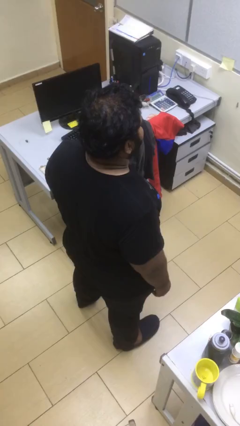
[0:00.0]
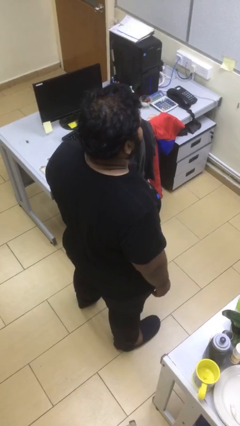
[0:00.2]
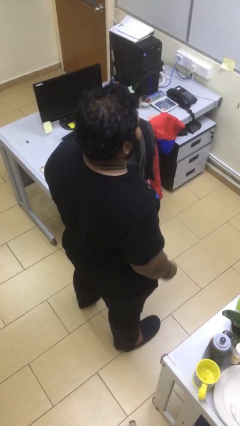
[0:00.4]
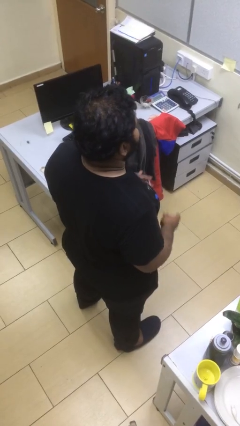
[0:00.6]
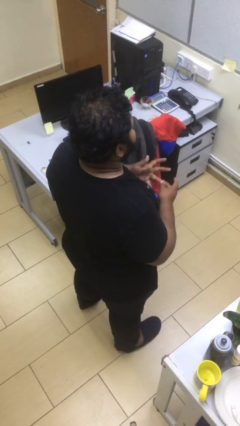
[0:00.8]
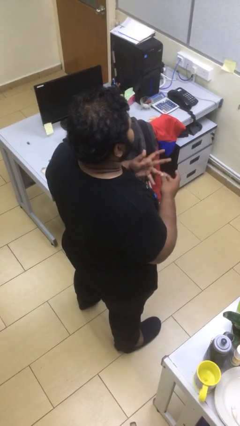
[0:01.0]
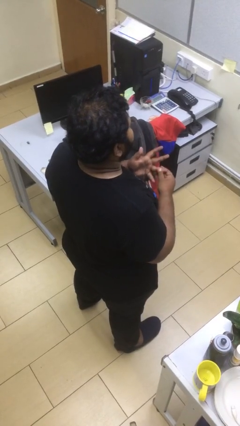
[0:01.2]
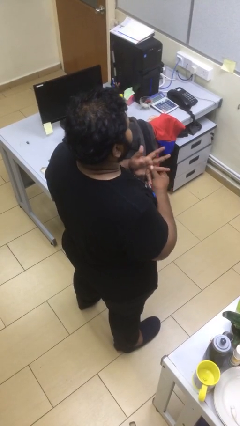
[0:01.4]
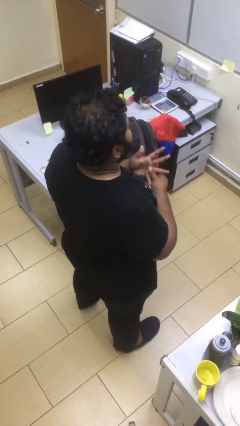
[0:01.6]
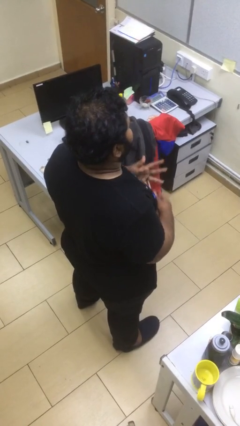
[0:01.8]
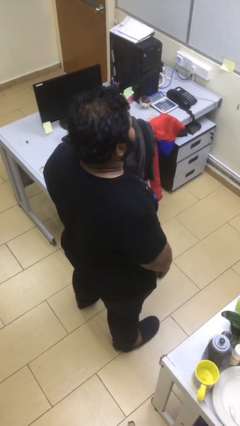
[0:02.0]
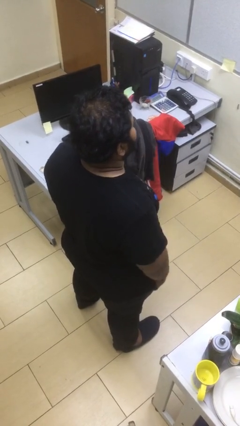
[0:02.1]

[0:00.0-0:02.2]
person puts on ring

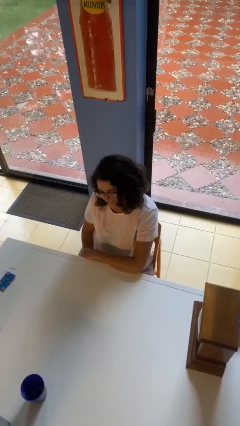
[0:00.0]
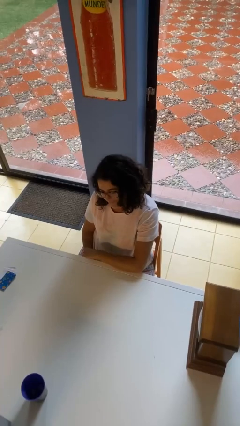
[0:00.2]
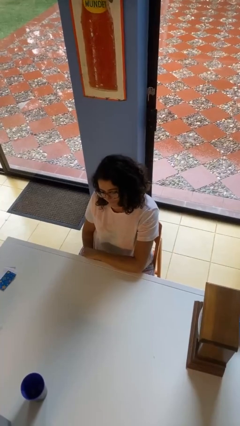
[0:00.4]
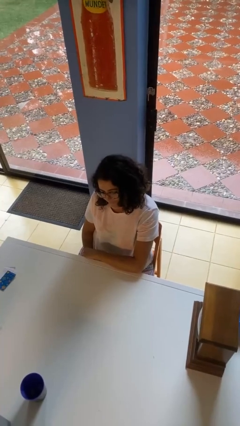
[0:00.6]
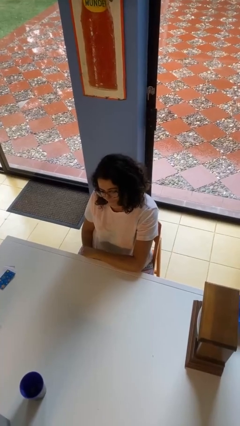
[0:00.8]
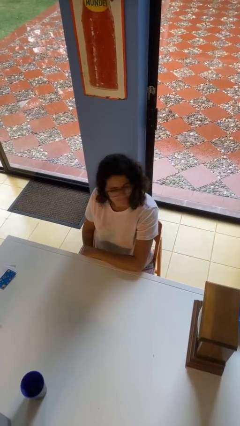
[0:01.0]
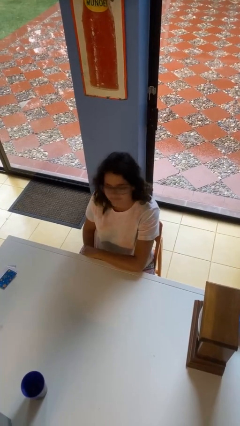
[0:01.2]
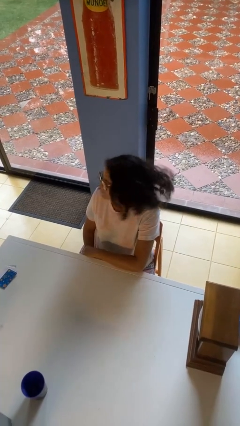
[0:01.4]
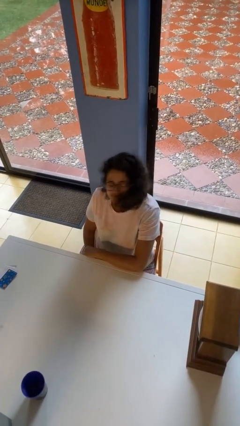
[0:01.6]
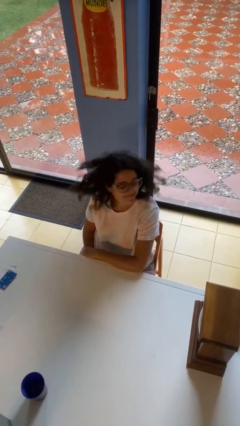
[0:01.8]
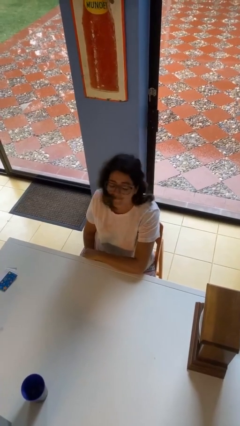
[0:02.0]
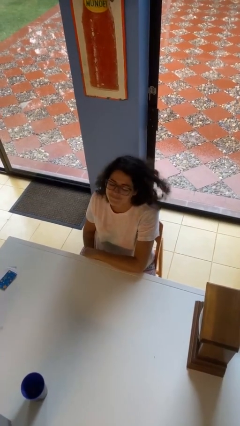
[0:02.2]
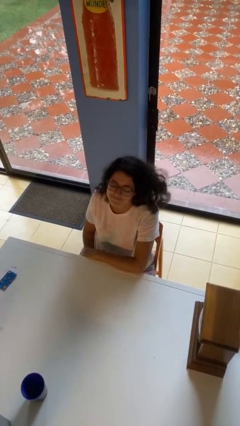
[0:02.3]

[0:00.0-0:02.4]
person shakes head

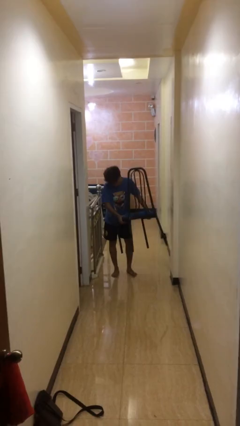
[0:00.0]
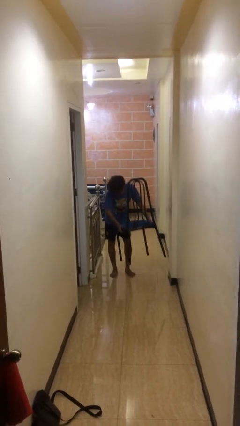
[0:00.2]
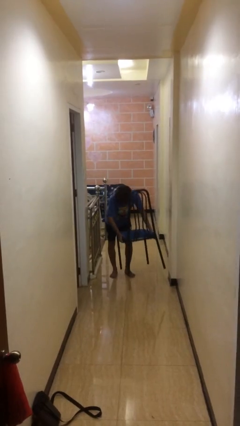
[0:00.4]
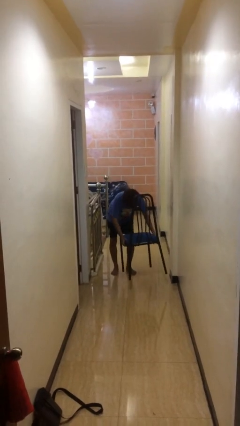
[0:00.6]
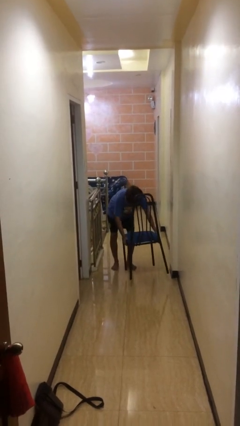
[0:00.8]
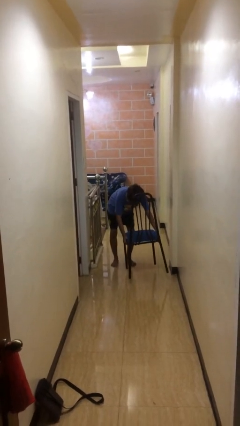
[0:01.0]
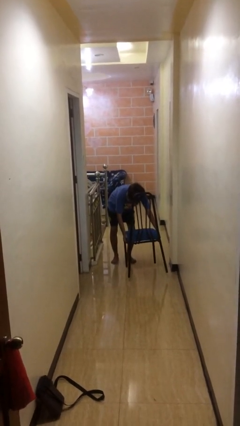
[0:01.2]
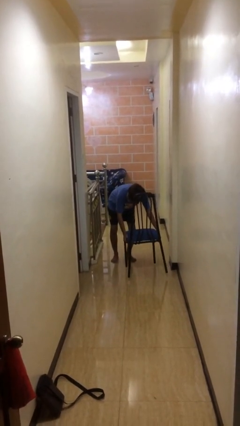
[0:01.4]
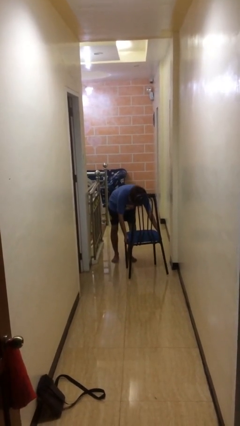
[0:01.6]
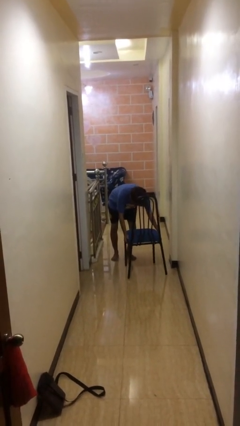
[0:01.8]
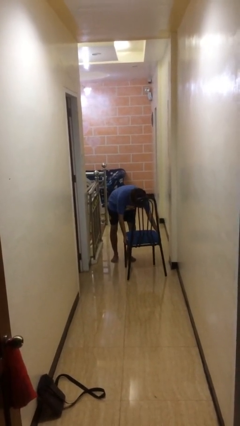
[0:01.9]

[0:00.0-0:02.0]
person puts down object on floor

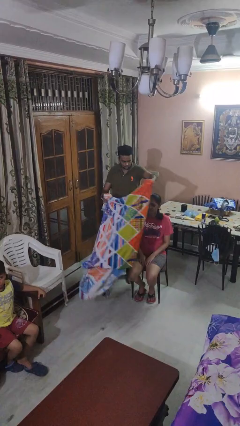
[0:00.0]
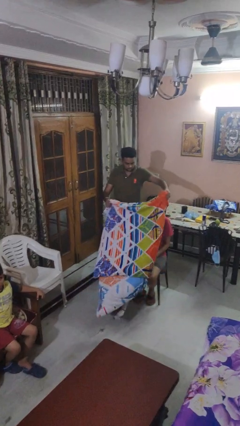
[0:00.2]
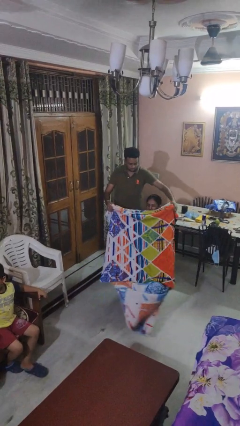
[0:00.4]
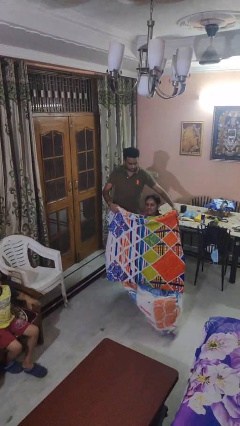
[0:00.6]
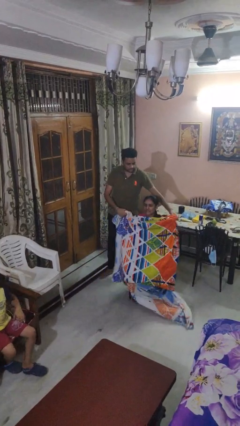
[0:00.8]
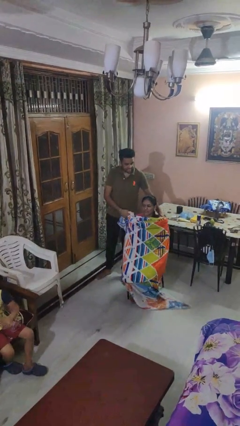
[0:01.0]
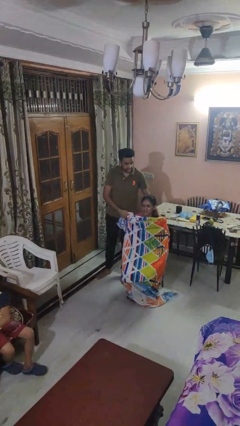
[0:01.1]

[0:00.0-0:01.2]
person covers friend with blanket

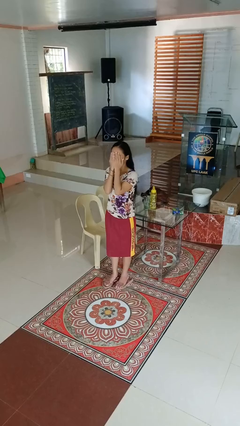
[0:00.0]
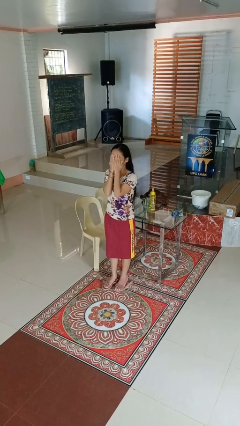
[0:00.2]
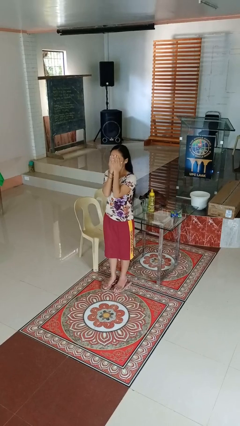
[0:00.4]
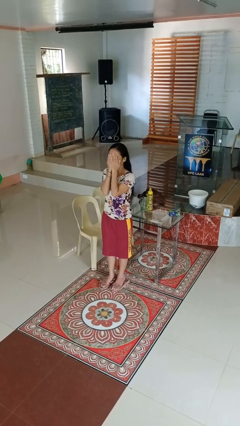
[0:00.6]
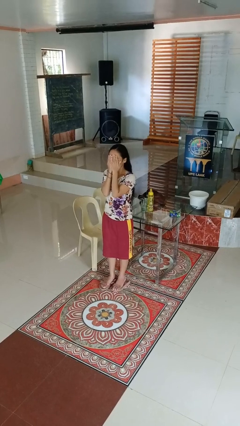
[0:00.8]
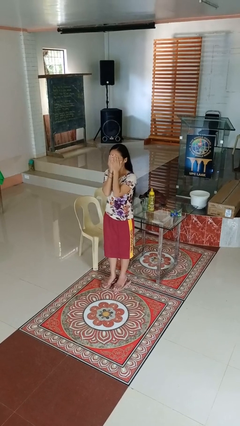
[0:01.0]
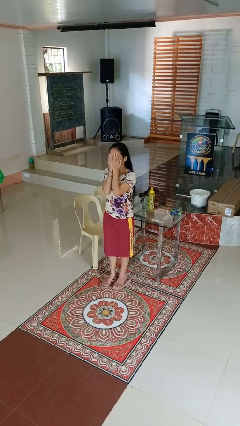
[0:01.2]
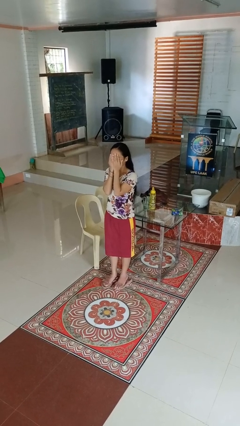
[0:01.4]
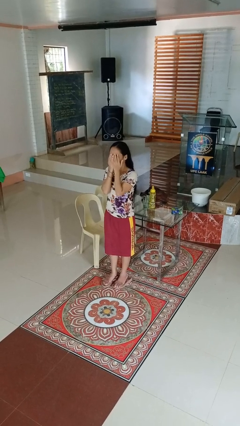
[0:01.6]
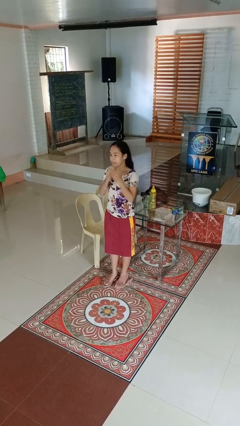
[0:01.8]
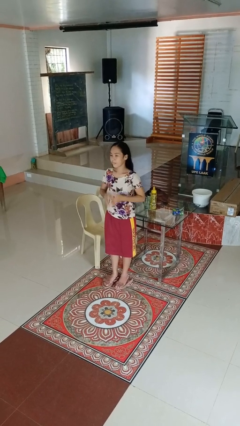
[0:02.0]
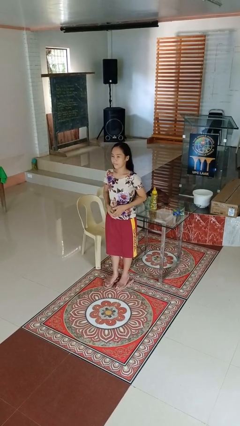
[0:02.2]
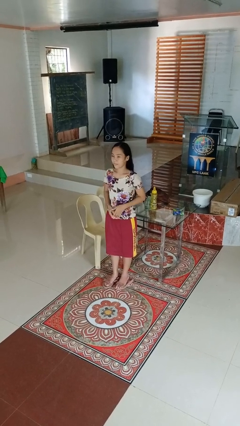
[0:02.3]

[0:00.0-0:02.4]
person covers face with hands

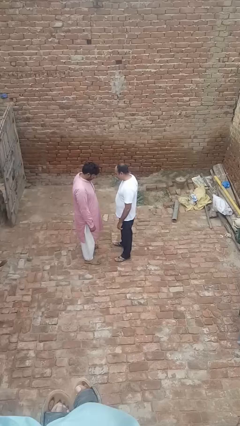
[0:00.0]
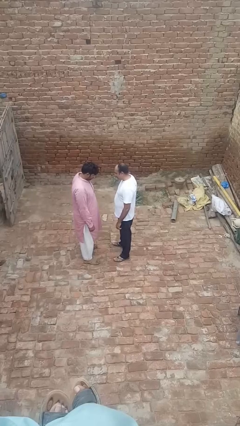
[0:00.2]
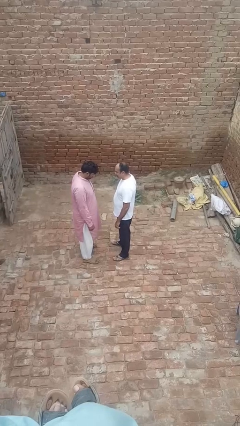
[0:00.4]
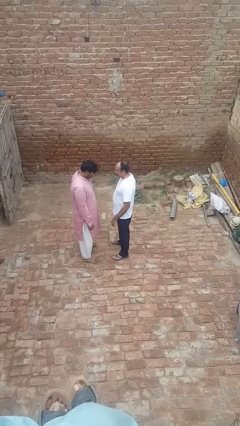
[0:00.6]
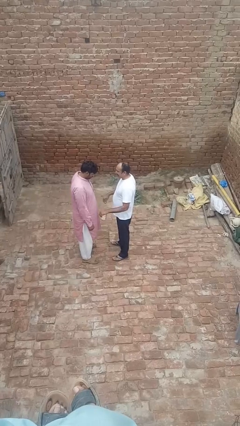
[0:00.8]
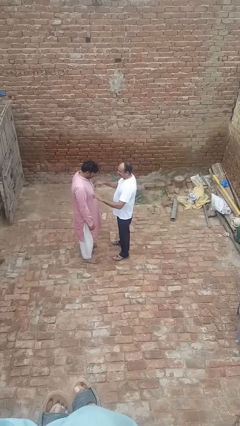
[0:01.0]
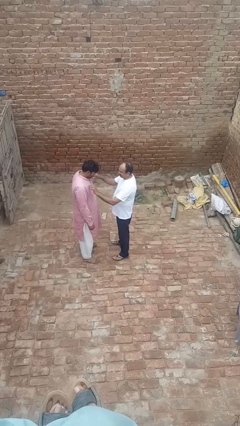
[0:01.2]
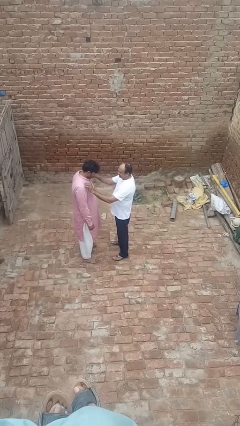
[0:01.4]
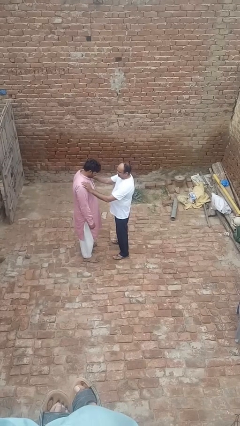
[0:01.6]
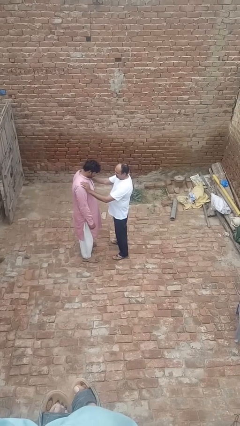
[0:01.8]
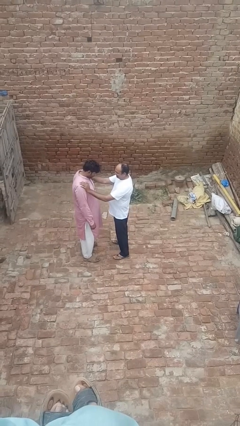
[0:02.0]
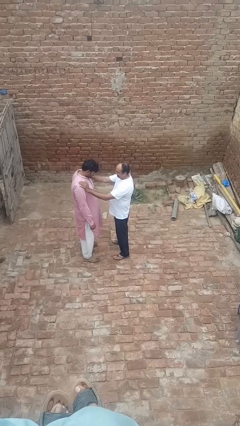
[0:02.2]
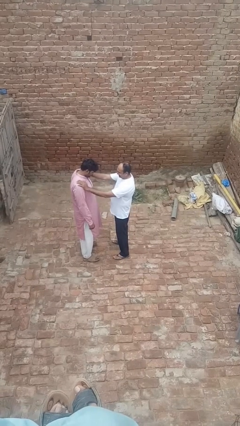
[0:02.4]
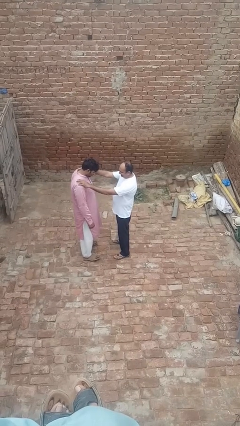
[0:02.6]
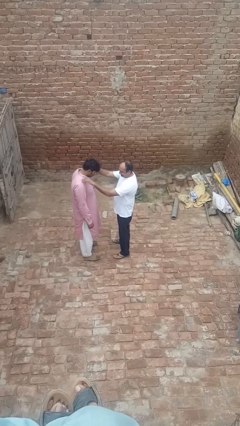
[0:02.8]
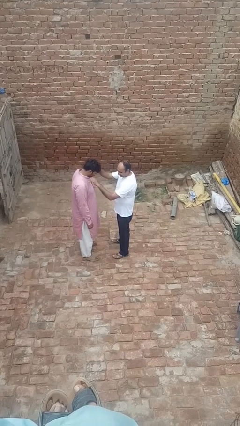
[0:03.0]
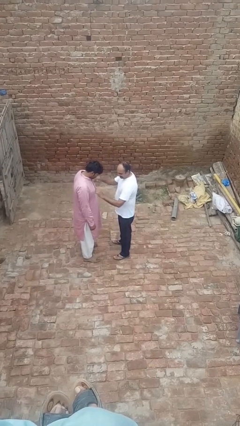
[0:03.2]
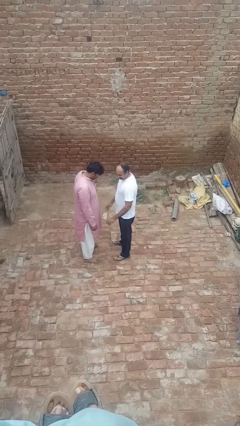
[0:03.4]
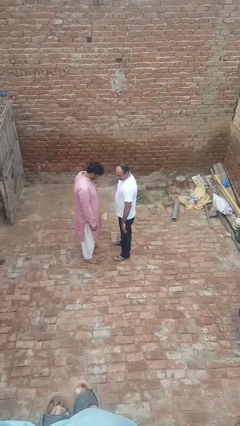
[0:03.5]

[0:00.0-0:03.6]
person shoves person

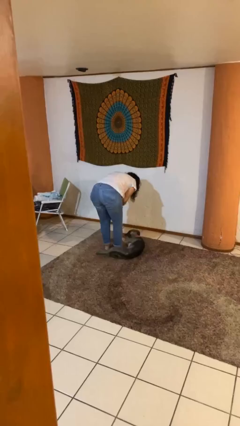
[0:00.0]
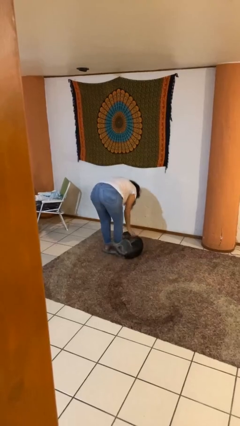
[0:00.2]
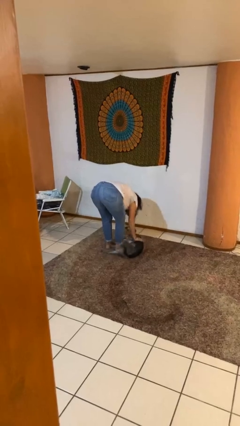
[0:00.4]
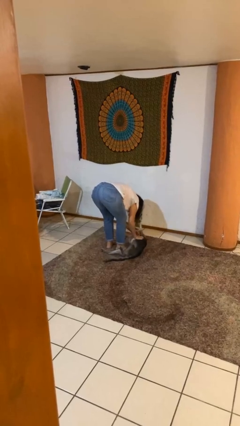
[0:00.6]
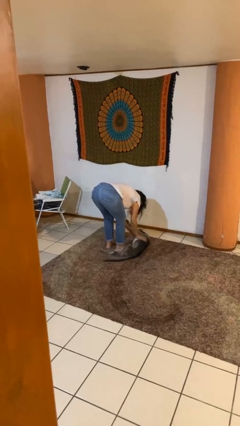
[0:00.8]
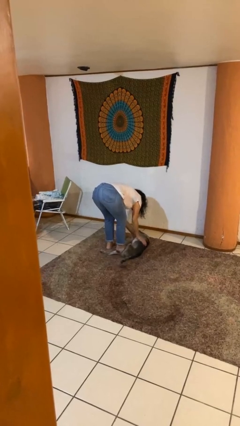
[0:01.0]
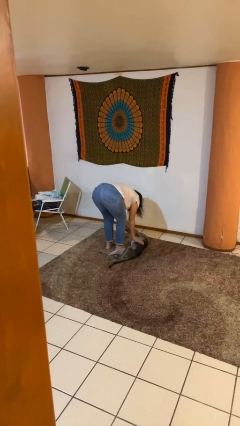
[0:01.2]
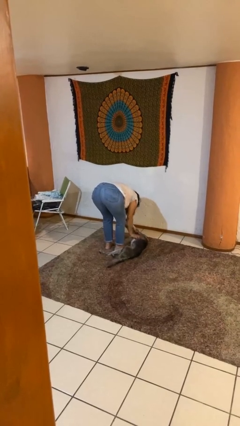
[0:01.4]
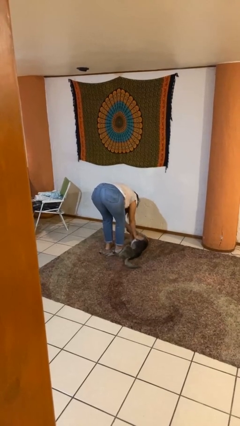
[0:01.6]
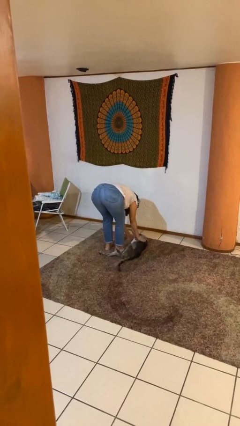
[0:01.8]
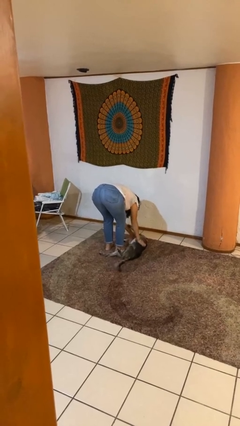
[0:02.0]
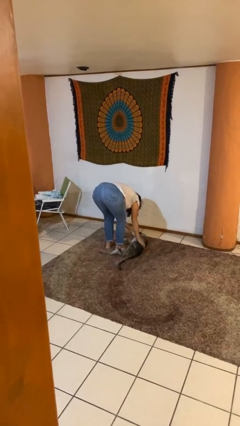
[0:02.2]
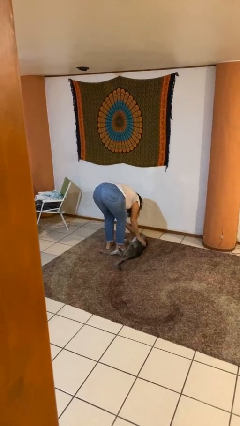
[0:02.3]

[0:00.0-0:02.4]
person pets dog

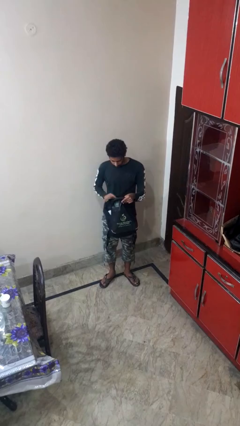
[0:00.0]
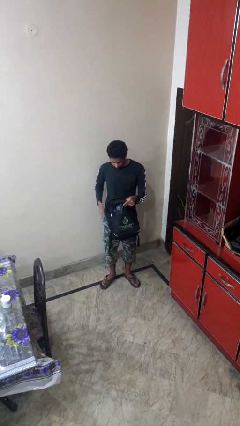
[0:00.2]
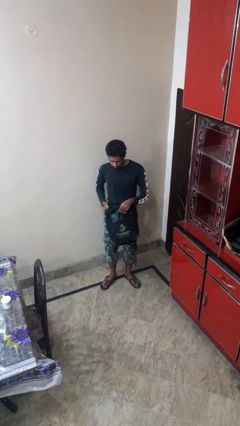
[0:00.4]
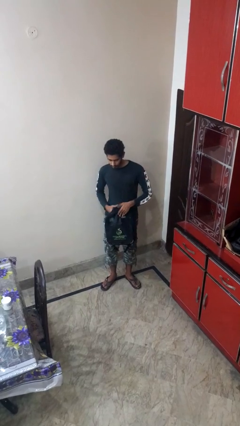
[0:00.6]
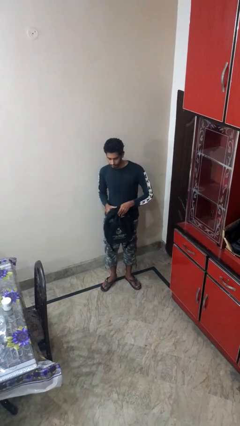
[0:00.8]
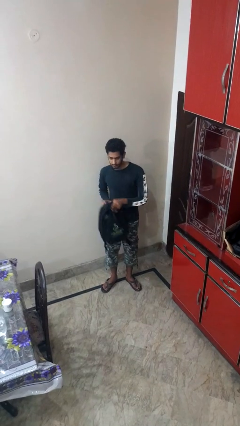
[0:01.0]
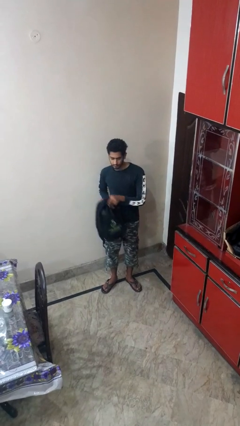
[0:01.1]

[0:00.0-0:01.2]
person puts object into backpack
